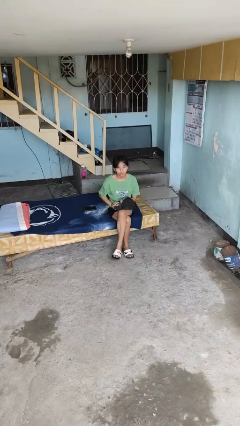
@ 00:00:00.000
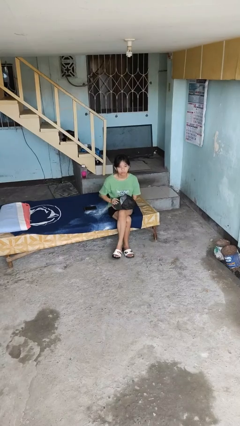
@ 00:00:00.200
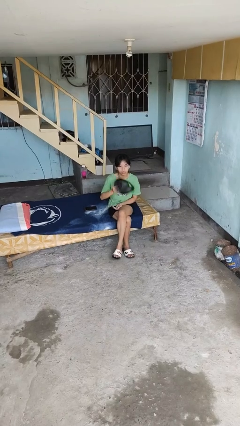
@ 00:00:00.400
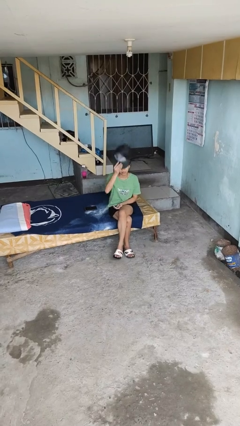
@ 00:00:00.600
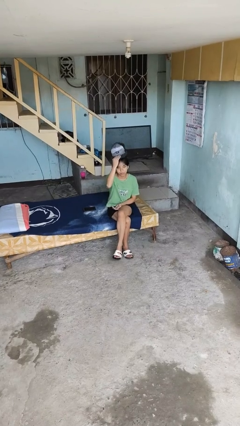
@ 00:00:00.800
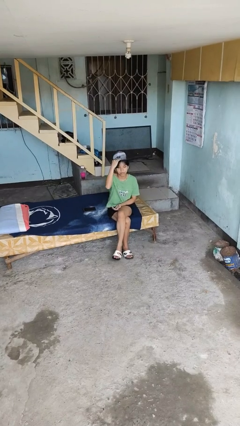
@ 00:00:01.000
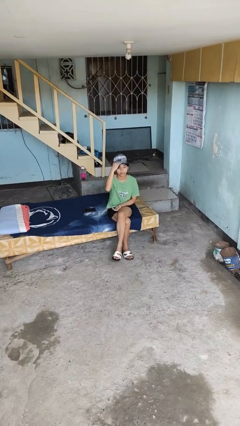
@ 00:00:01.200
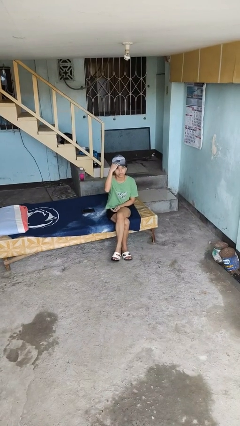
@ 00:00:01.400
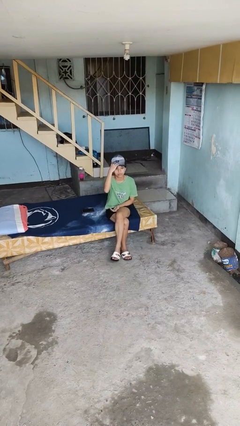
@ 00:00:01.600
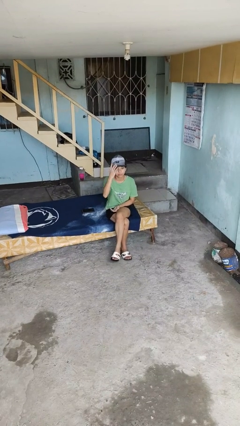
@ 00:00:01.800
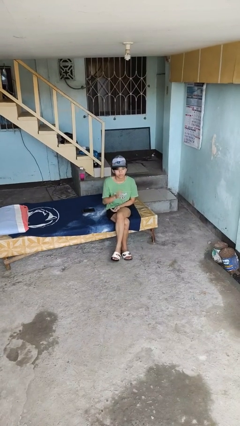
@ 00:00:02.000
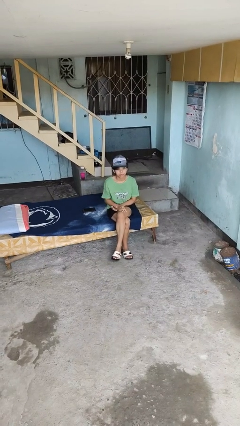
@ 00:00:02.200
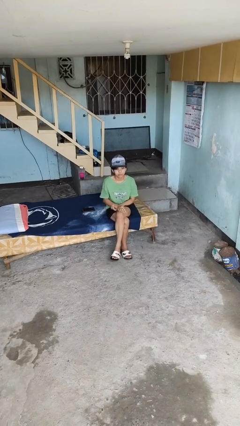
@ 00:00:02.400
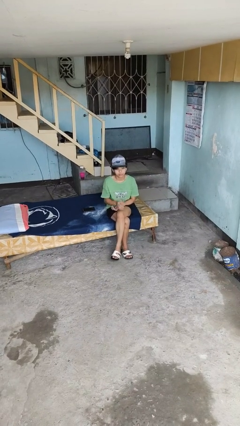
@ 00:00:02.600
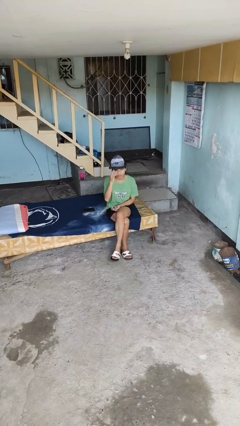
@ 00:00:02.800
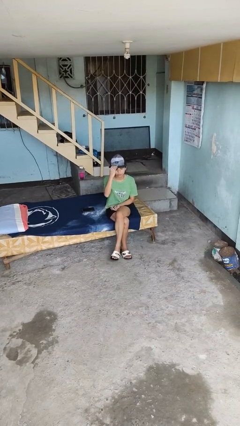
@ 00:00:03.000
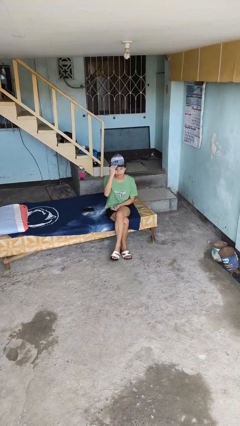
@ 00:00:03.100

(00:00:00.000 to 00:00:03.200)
person puts on hat

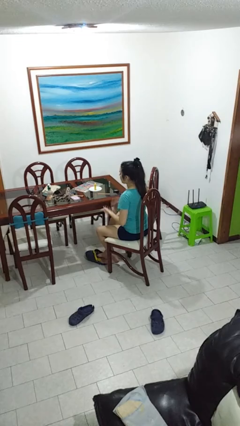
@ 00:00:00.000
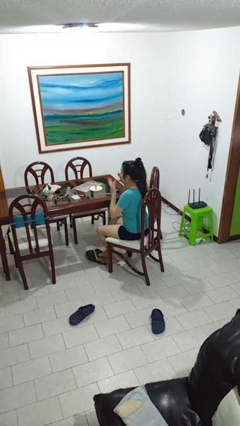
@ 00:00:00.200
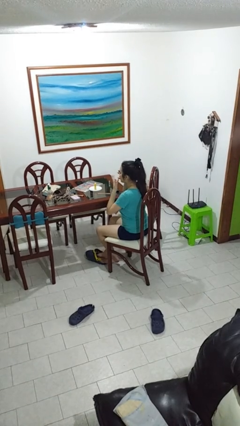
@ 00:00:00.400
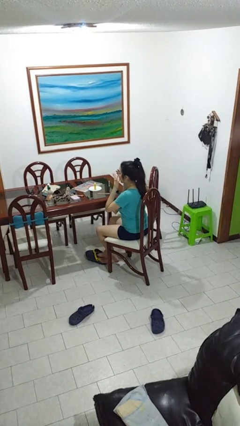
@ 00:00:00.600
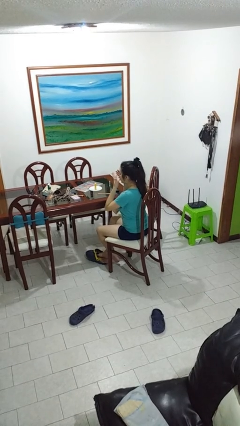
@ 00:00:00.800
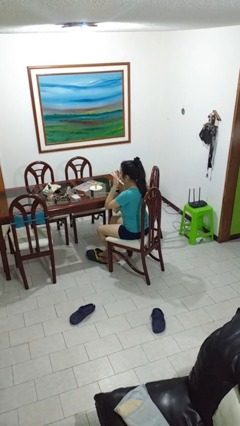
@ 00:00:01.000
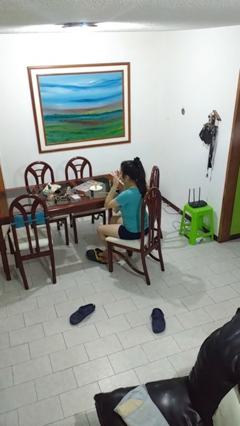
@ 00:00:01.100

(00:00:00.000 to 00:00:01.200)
person licks fingers

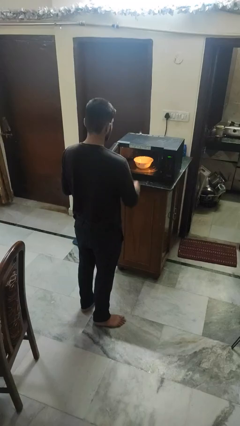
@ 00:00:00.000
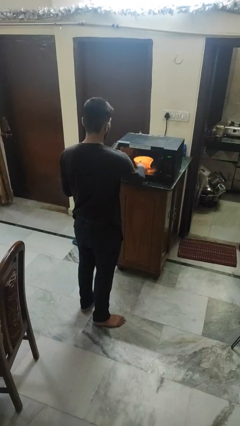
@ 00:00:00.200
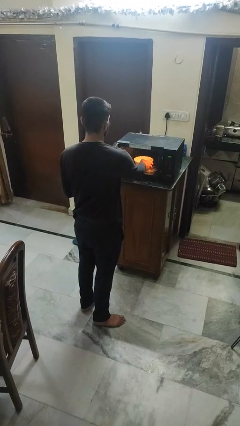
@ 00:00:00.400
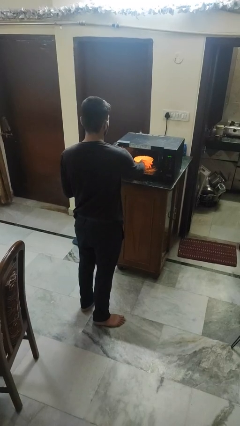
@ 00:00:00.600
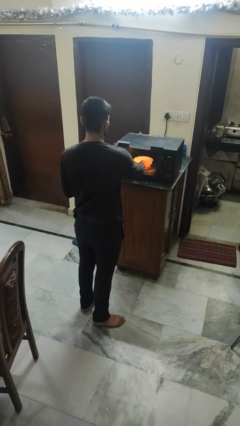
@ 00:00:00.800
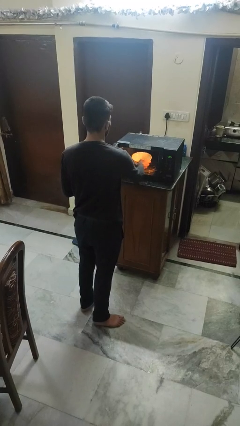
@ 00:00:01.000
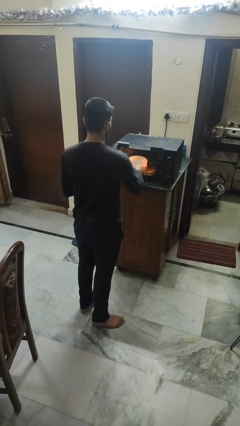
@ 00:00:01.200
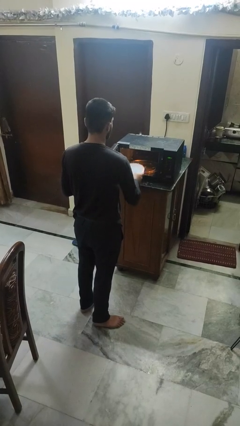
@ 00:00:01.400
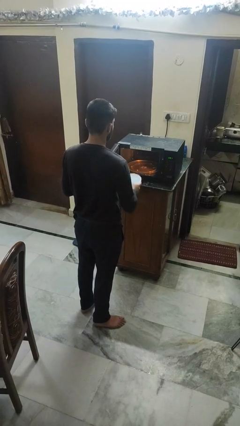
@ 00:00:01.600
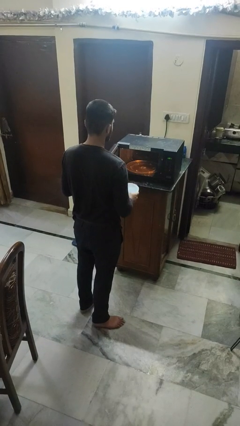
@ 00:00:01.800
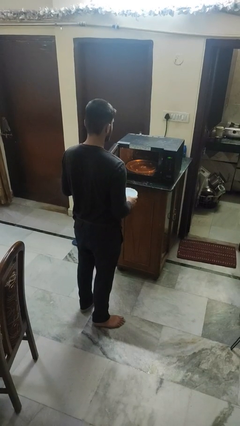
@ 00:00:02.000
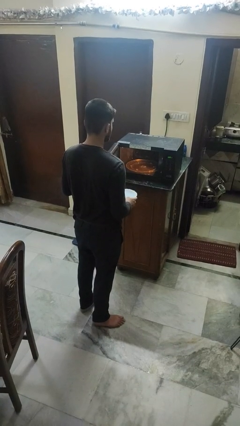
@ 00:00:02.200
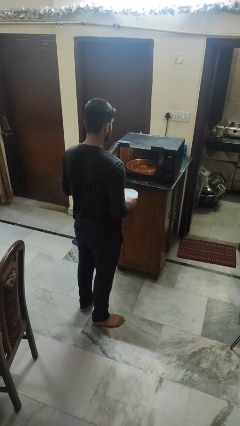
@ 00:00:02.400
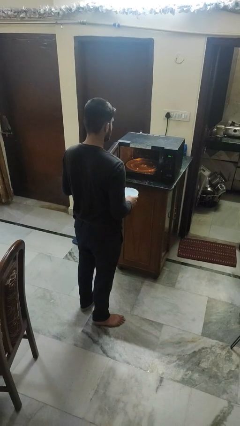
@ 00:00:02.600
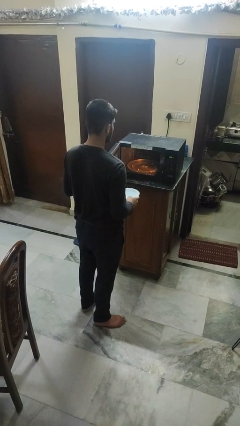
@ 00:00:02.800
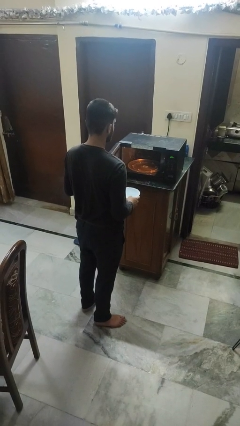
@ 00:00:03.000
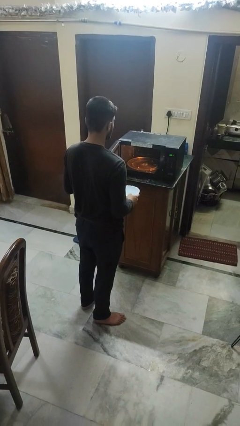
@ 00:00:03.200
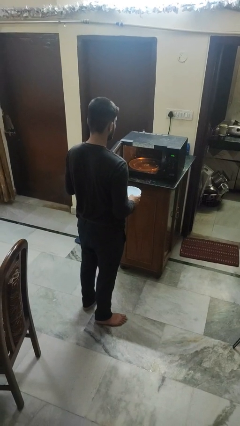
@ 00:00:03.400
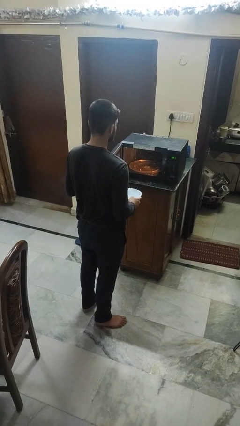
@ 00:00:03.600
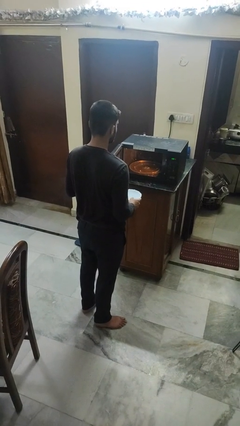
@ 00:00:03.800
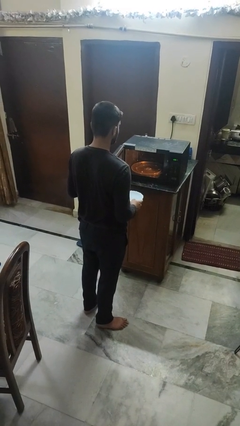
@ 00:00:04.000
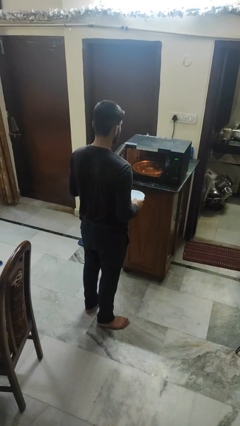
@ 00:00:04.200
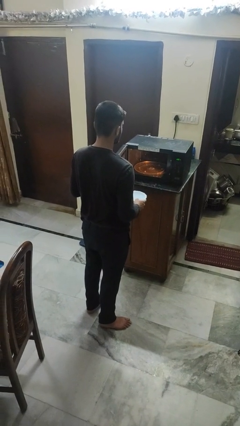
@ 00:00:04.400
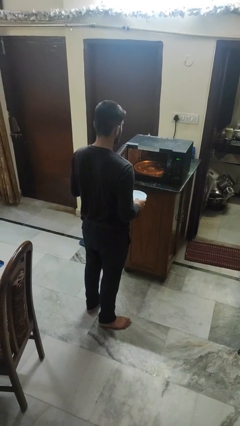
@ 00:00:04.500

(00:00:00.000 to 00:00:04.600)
person takes object from oven

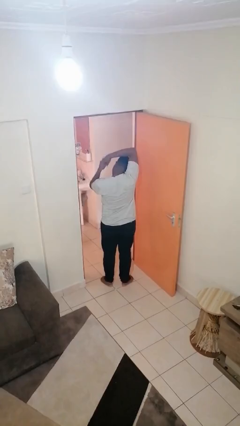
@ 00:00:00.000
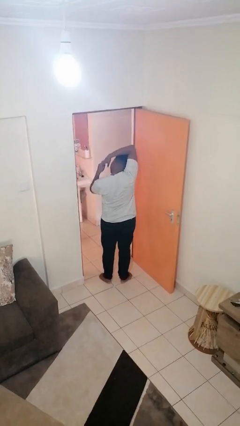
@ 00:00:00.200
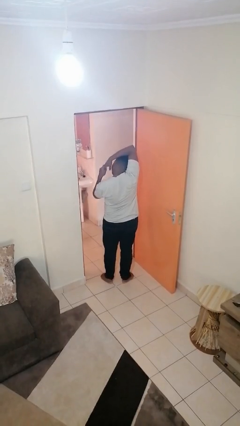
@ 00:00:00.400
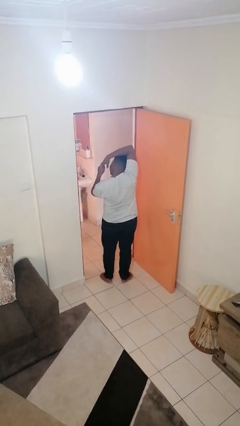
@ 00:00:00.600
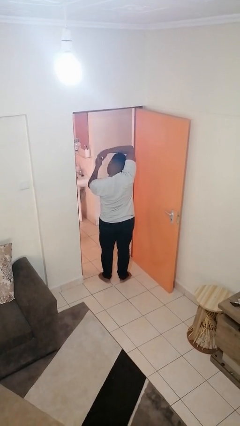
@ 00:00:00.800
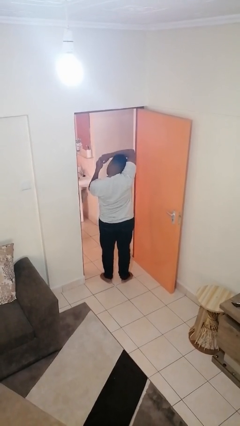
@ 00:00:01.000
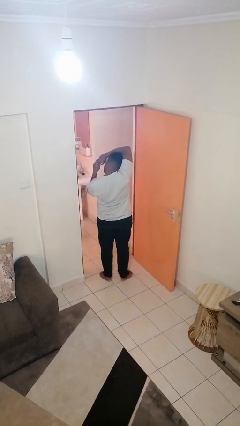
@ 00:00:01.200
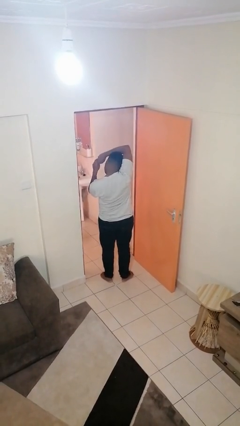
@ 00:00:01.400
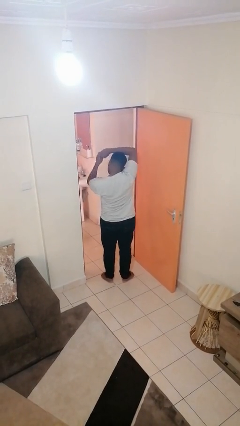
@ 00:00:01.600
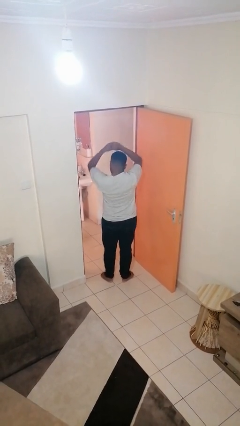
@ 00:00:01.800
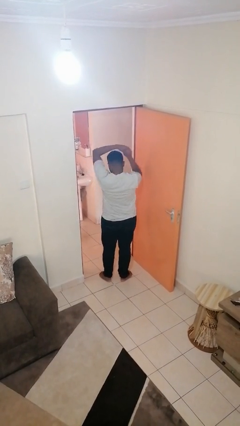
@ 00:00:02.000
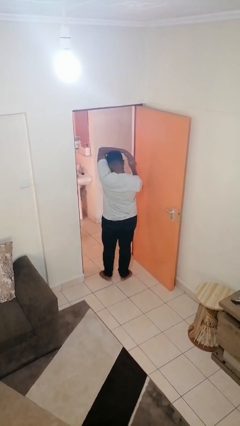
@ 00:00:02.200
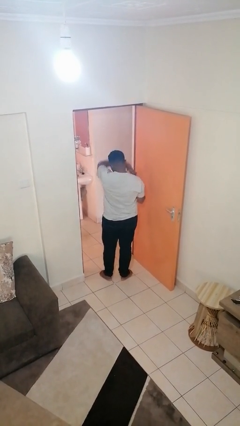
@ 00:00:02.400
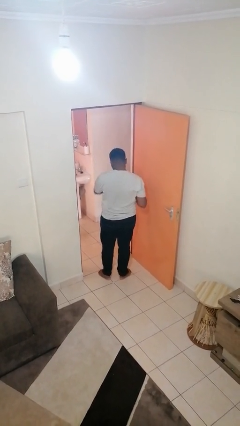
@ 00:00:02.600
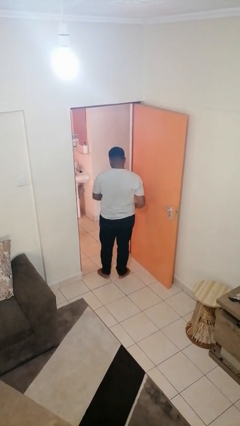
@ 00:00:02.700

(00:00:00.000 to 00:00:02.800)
person stretches arms over head

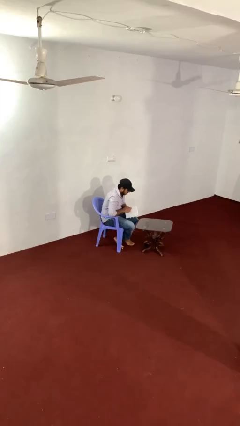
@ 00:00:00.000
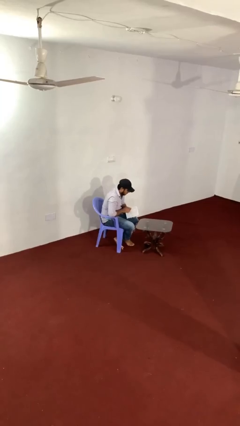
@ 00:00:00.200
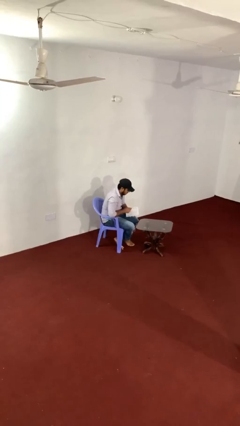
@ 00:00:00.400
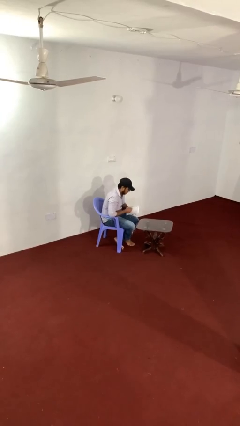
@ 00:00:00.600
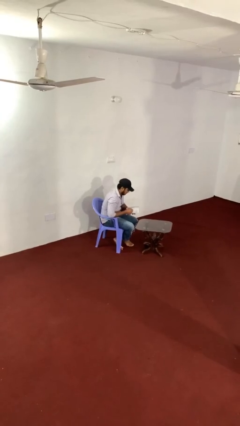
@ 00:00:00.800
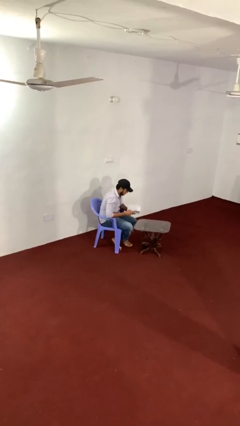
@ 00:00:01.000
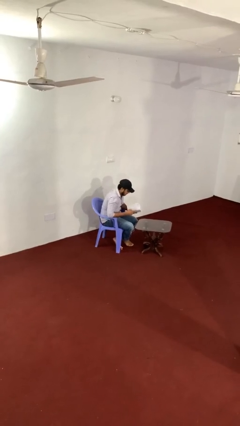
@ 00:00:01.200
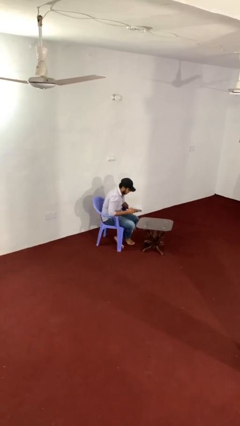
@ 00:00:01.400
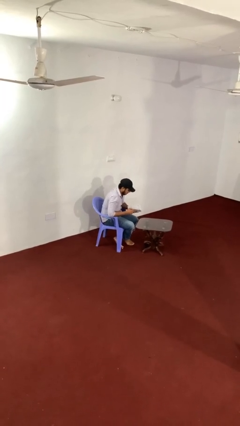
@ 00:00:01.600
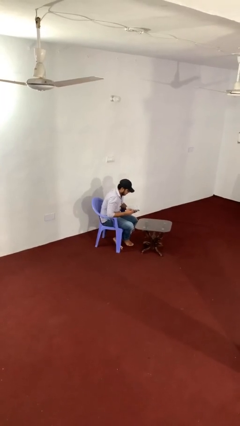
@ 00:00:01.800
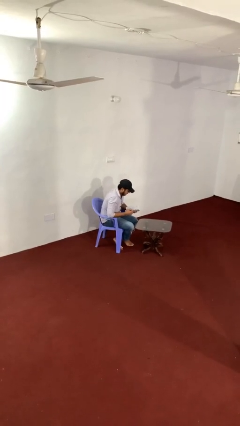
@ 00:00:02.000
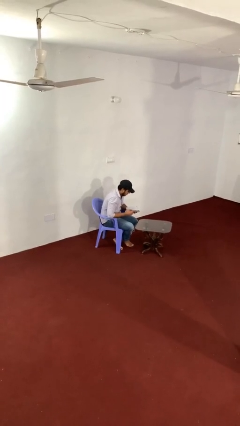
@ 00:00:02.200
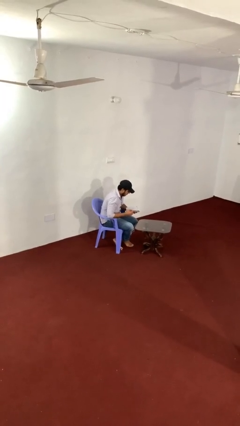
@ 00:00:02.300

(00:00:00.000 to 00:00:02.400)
person reads document

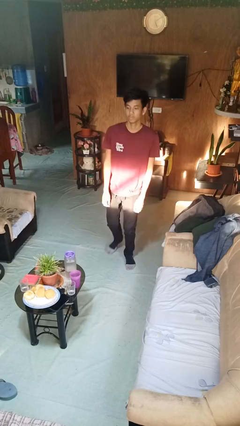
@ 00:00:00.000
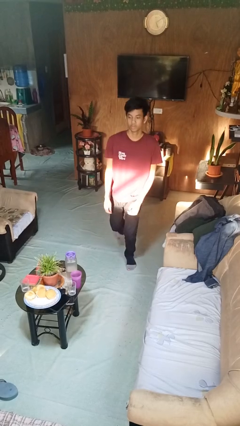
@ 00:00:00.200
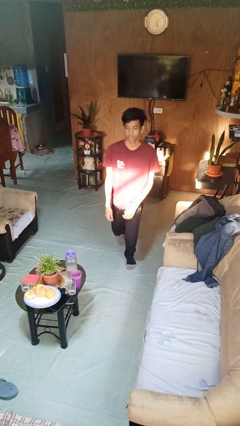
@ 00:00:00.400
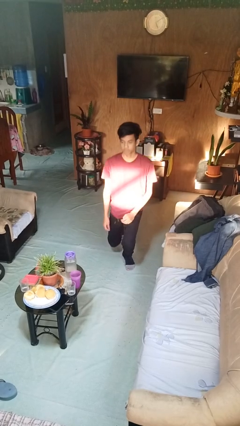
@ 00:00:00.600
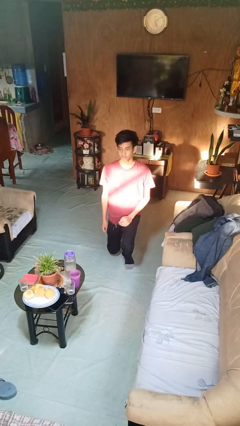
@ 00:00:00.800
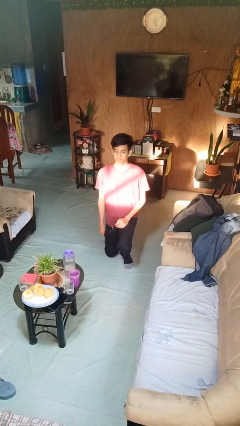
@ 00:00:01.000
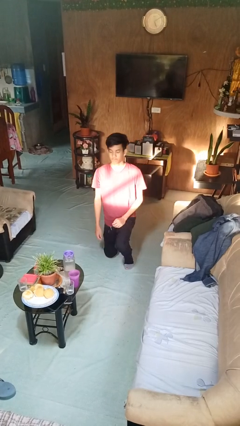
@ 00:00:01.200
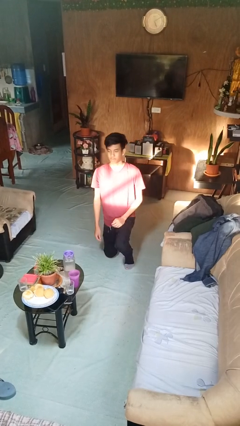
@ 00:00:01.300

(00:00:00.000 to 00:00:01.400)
person kneels

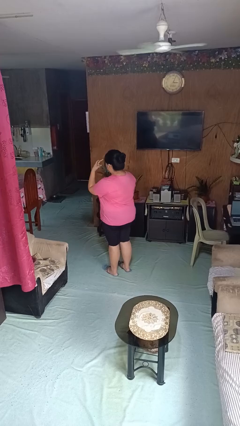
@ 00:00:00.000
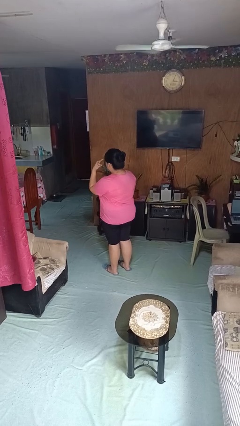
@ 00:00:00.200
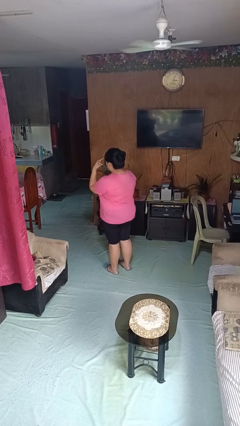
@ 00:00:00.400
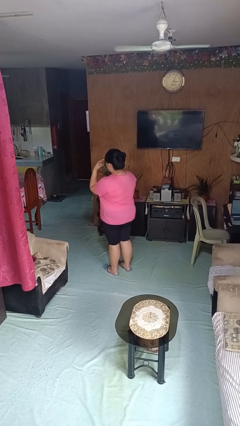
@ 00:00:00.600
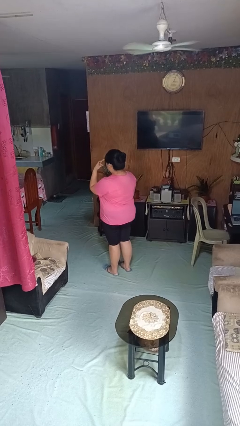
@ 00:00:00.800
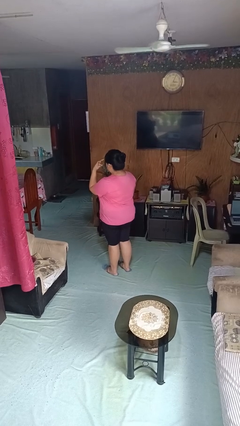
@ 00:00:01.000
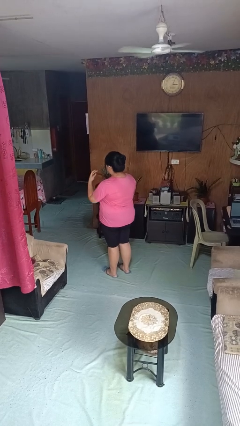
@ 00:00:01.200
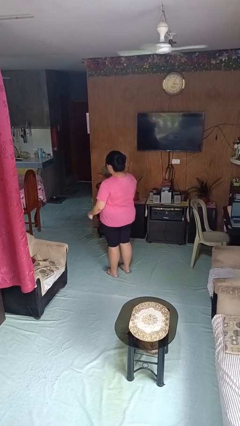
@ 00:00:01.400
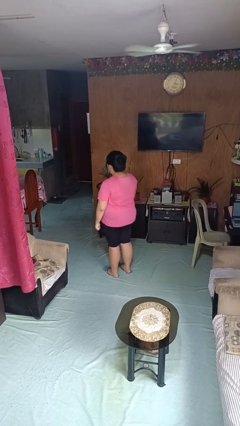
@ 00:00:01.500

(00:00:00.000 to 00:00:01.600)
person gestures watch closely
